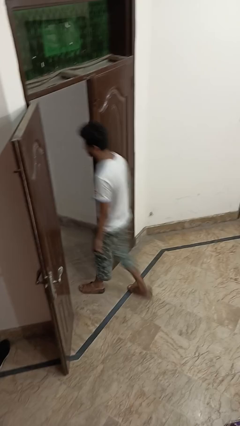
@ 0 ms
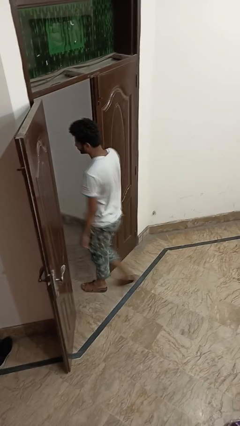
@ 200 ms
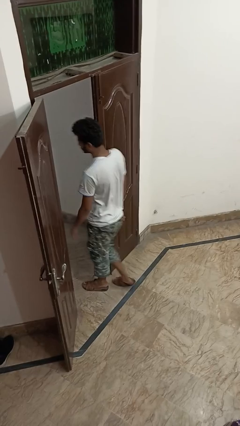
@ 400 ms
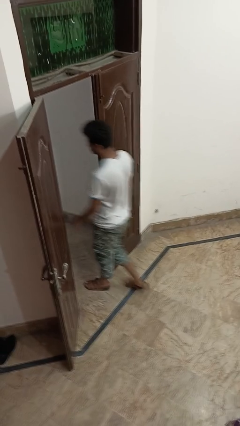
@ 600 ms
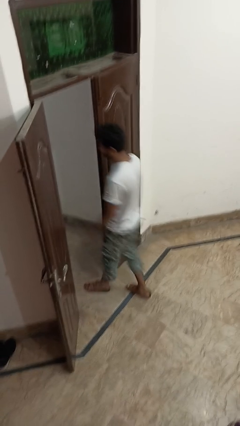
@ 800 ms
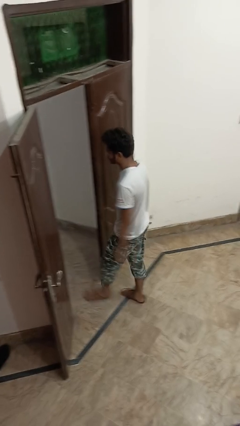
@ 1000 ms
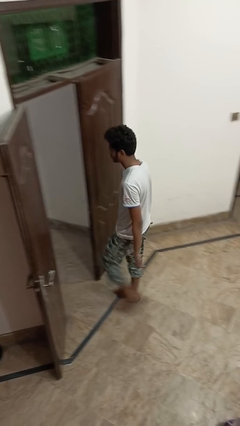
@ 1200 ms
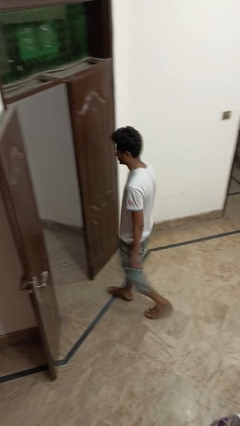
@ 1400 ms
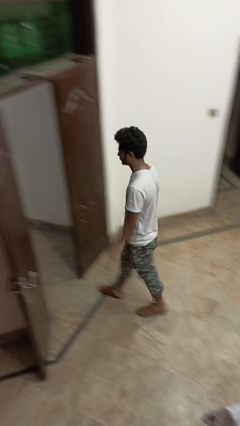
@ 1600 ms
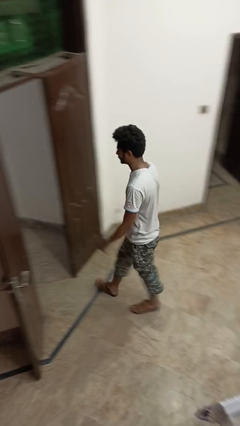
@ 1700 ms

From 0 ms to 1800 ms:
person bumps into wall

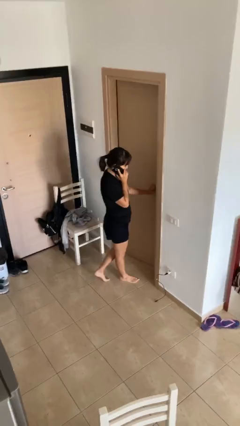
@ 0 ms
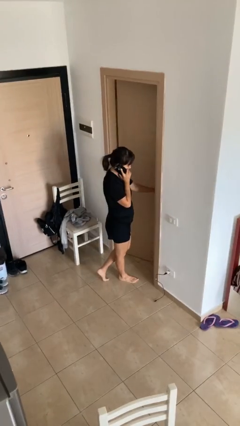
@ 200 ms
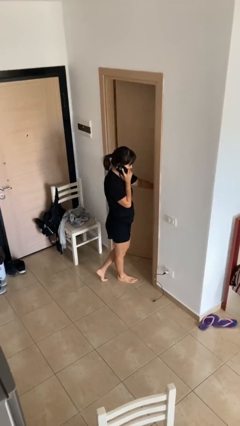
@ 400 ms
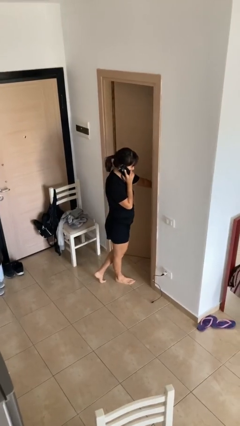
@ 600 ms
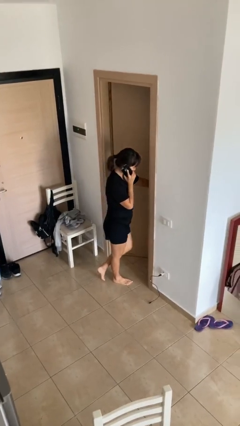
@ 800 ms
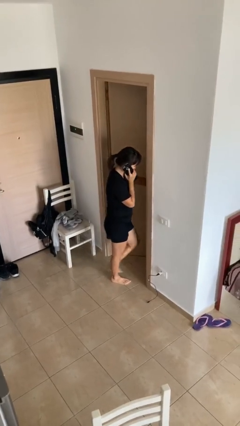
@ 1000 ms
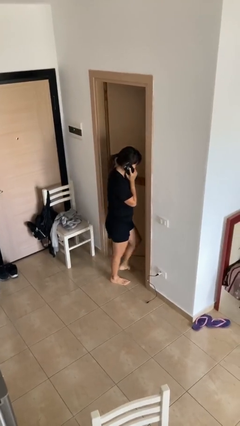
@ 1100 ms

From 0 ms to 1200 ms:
person opens facility door

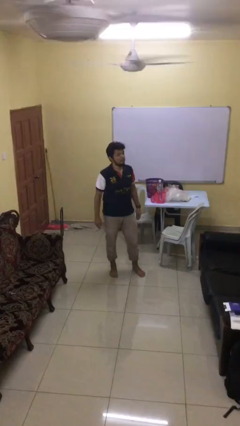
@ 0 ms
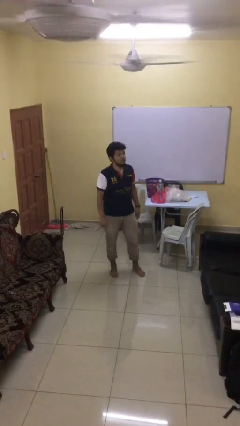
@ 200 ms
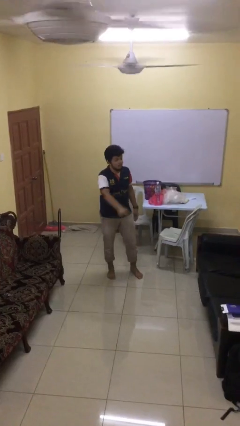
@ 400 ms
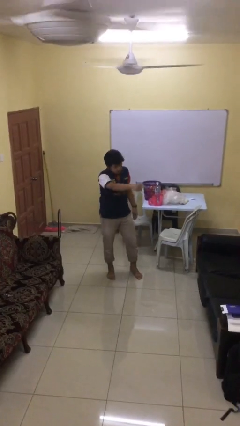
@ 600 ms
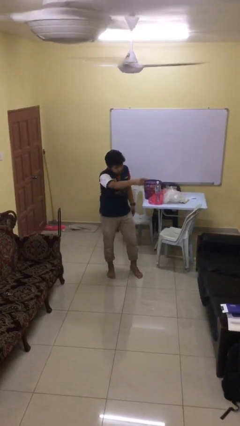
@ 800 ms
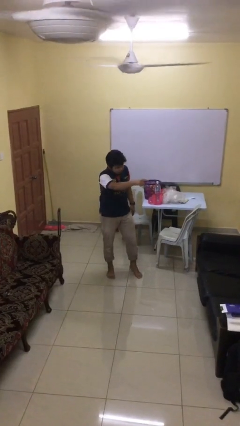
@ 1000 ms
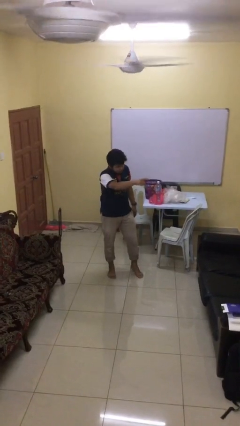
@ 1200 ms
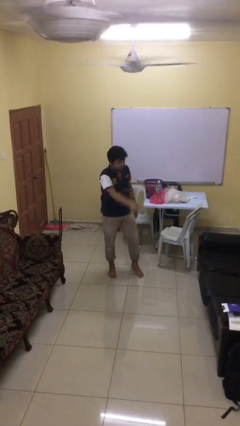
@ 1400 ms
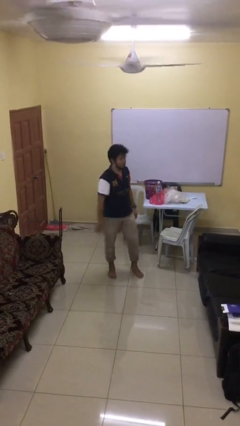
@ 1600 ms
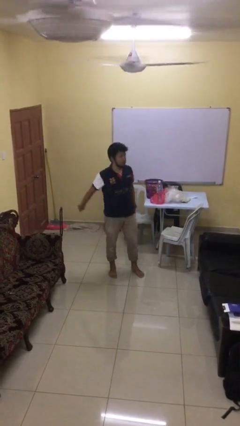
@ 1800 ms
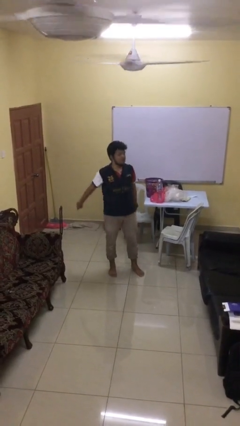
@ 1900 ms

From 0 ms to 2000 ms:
person points at person

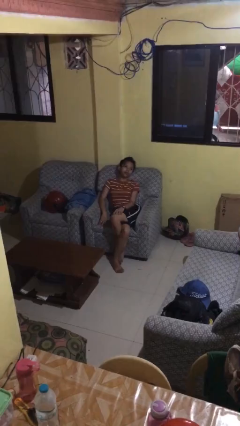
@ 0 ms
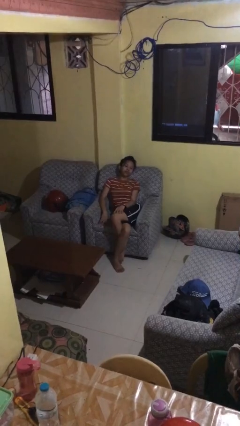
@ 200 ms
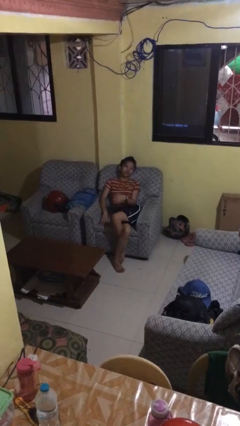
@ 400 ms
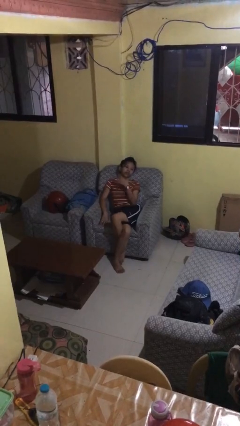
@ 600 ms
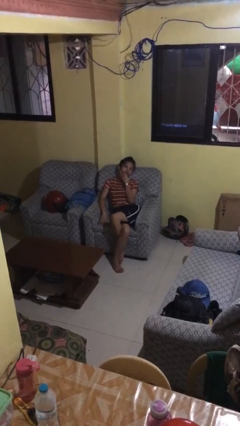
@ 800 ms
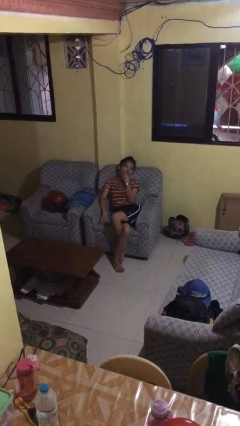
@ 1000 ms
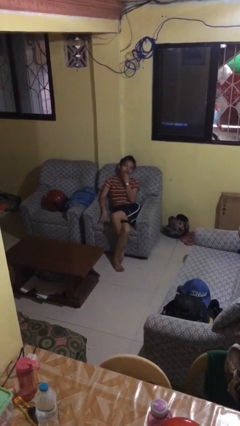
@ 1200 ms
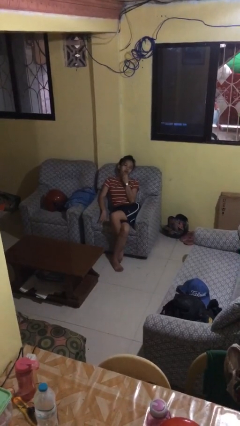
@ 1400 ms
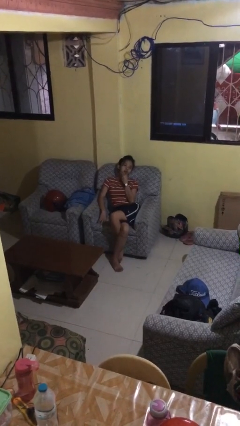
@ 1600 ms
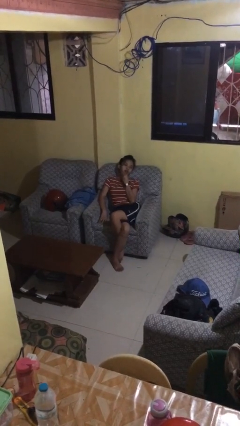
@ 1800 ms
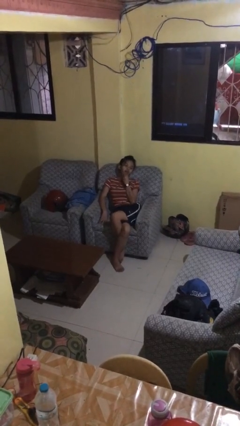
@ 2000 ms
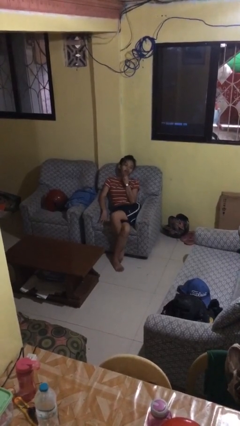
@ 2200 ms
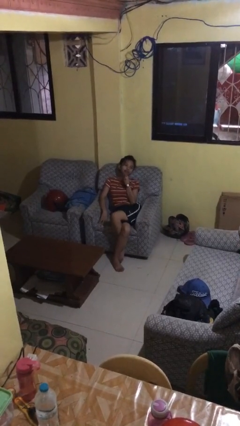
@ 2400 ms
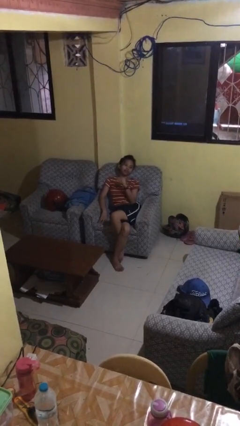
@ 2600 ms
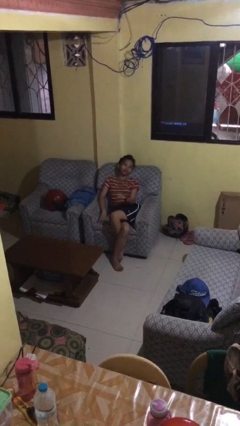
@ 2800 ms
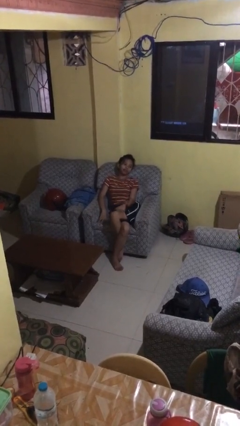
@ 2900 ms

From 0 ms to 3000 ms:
person strokes chin

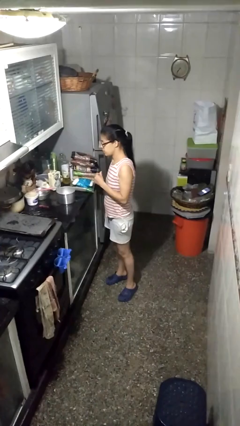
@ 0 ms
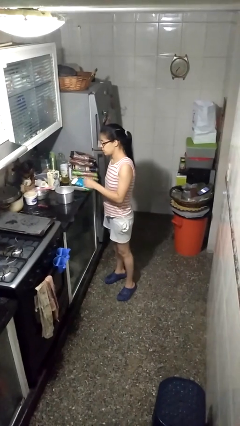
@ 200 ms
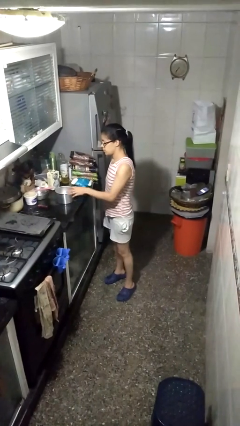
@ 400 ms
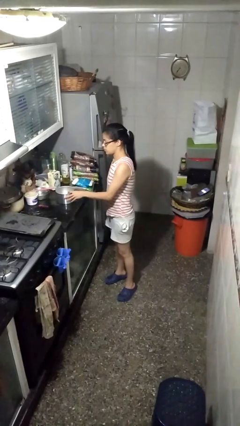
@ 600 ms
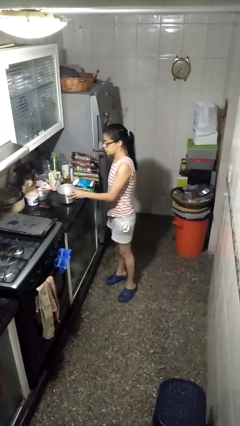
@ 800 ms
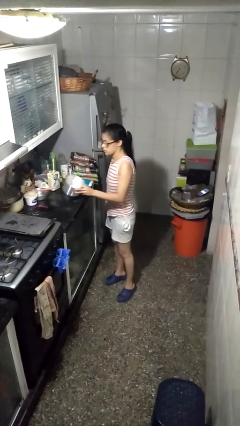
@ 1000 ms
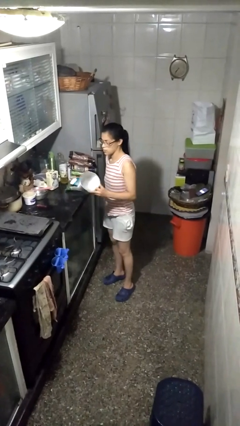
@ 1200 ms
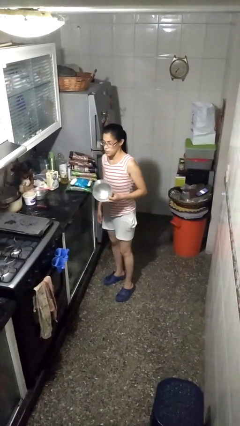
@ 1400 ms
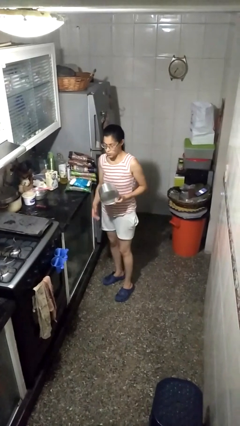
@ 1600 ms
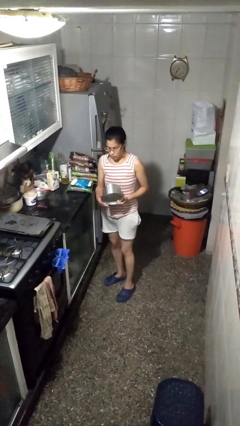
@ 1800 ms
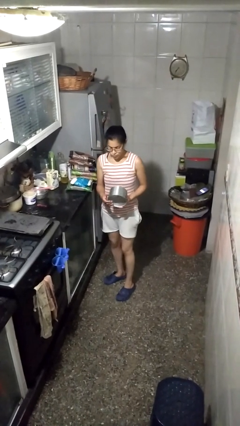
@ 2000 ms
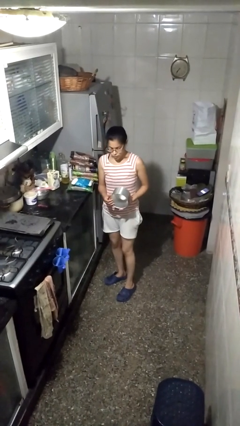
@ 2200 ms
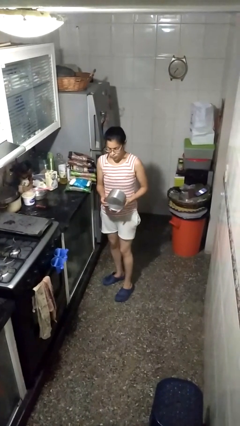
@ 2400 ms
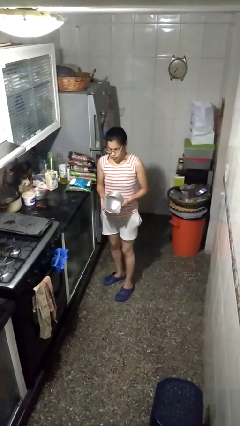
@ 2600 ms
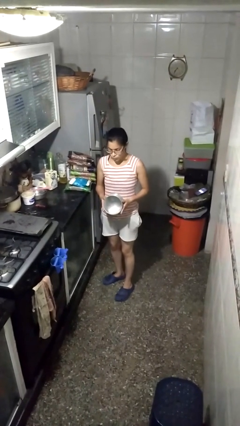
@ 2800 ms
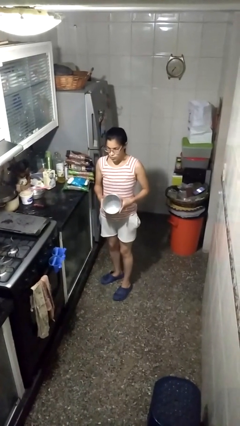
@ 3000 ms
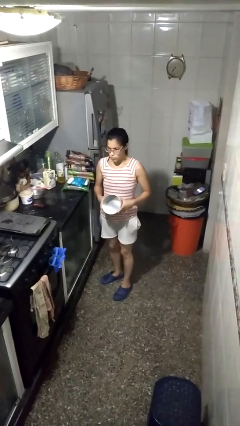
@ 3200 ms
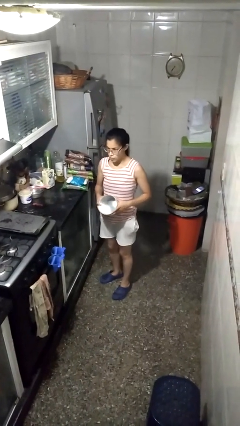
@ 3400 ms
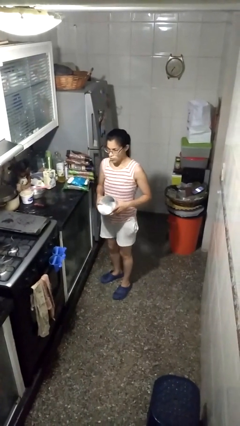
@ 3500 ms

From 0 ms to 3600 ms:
person picks up object from countertop

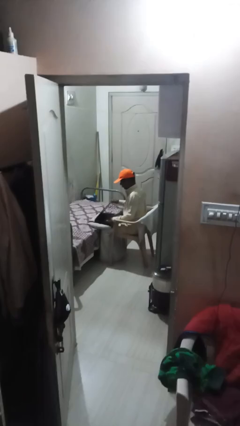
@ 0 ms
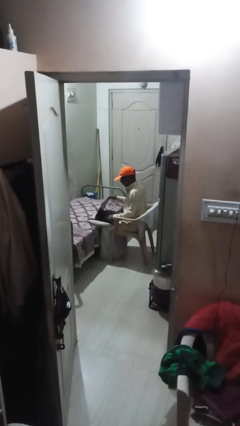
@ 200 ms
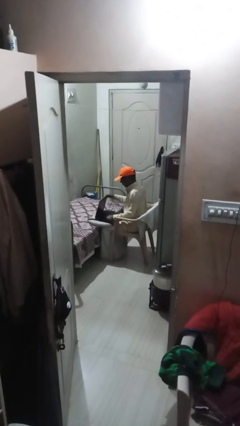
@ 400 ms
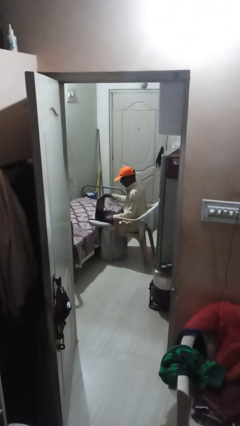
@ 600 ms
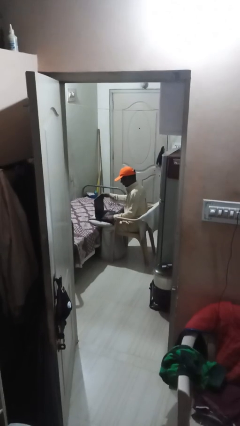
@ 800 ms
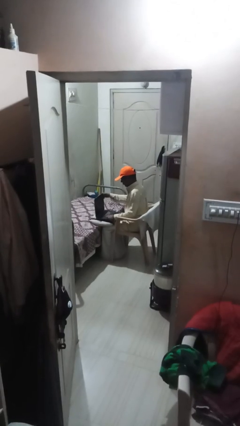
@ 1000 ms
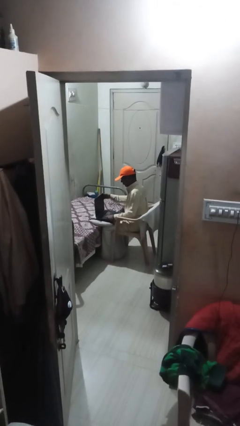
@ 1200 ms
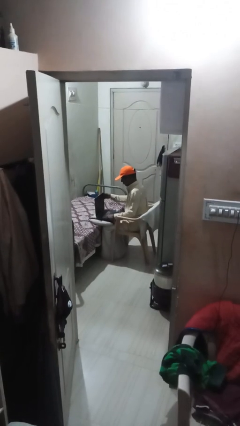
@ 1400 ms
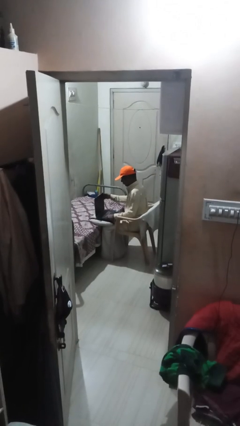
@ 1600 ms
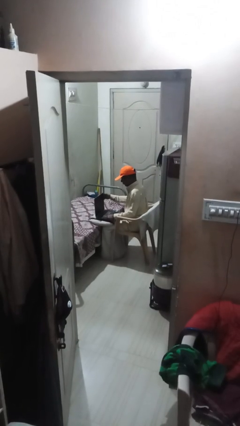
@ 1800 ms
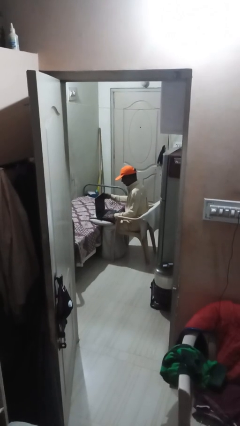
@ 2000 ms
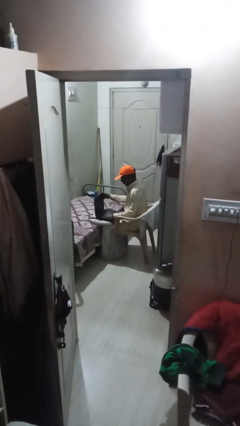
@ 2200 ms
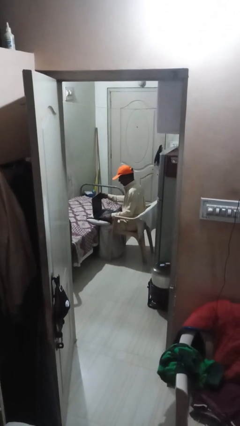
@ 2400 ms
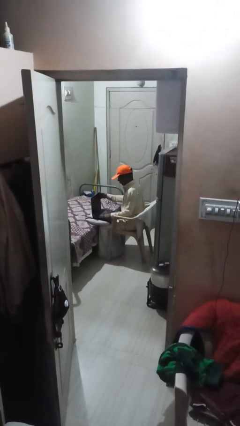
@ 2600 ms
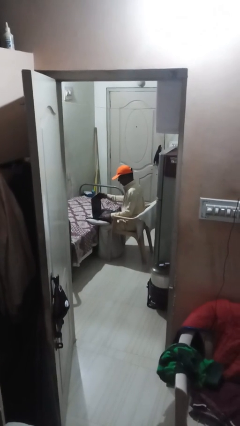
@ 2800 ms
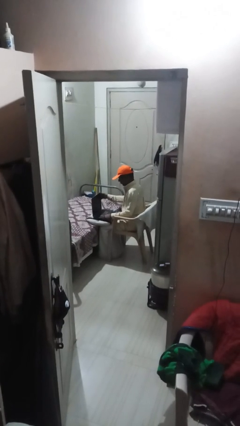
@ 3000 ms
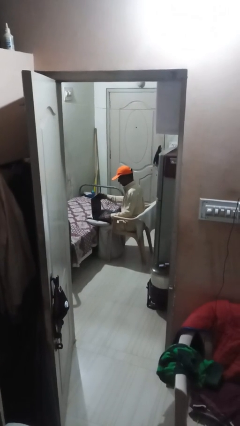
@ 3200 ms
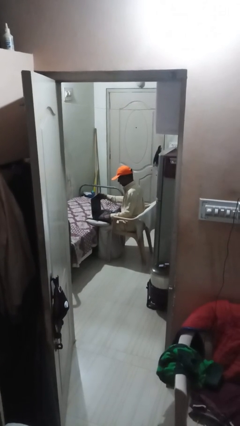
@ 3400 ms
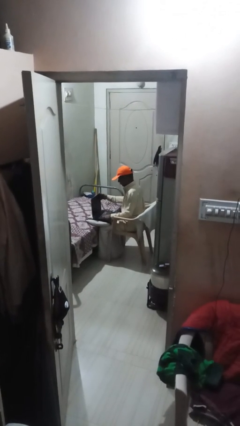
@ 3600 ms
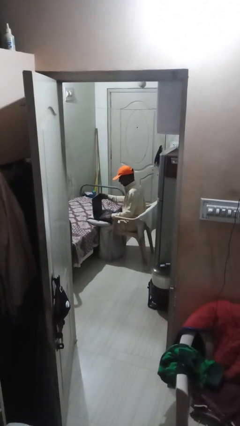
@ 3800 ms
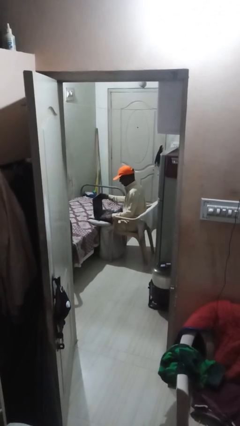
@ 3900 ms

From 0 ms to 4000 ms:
person interacts with laptop

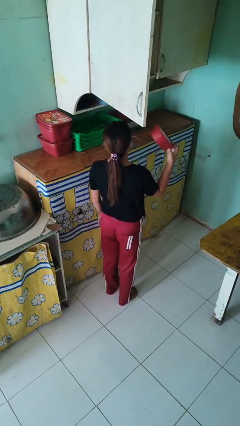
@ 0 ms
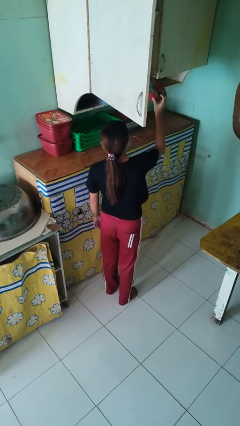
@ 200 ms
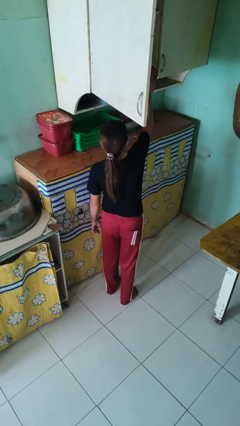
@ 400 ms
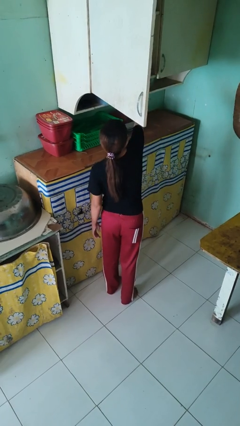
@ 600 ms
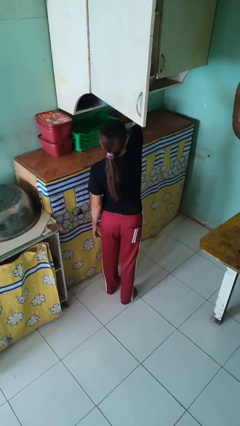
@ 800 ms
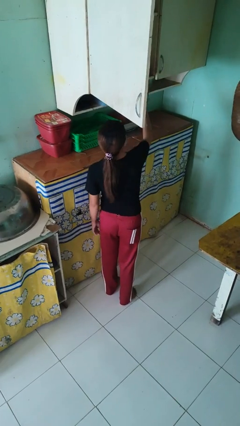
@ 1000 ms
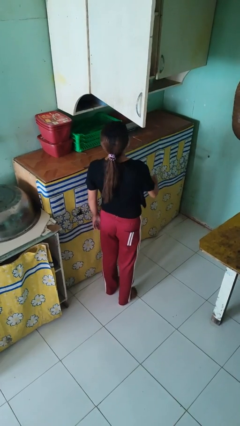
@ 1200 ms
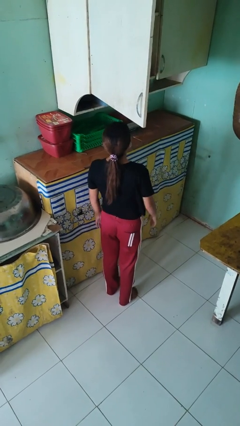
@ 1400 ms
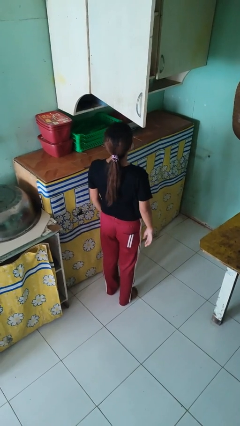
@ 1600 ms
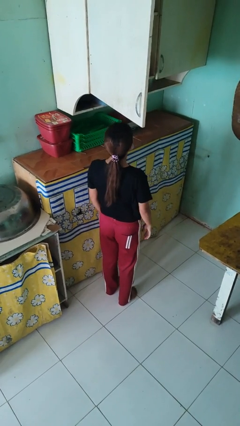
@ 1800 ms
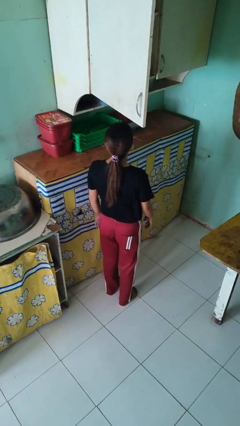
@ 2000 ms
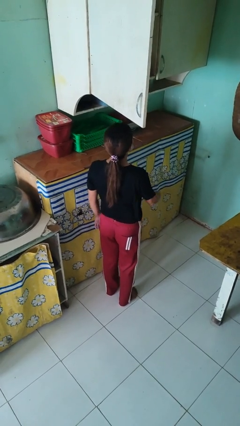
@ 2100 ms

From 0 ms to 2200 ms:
person puts object in cabinet
